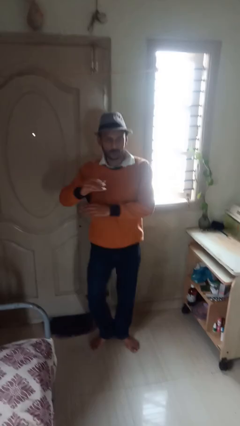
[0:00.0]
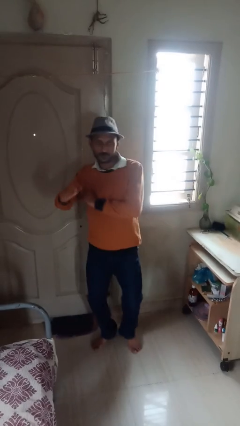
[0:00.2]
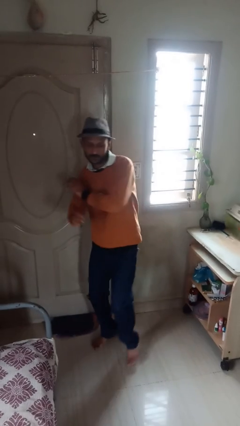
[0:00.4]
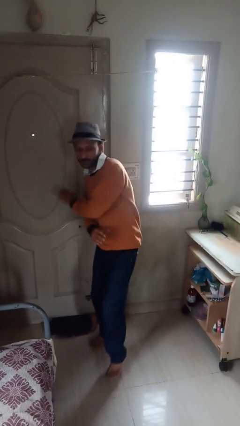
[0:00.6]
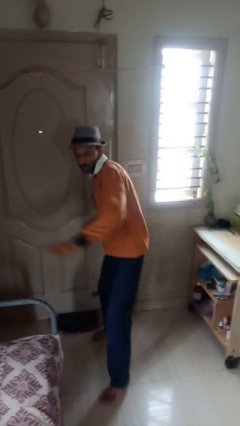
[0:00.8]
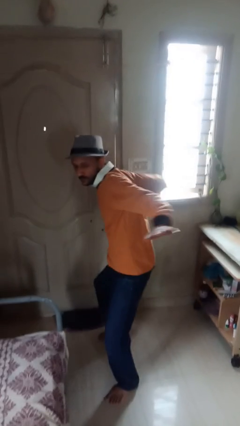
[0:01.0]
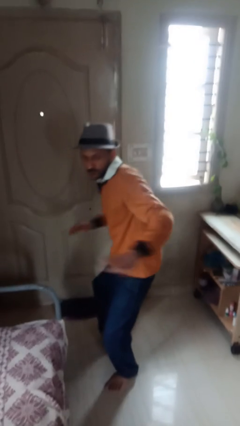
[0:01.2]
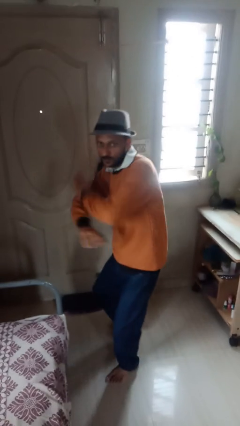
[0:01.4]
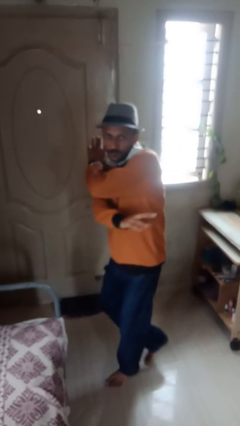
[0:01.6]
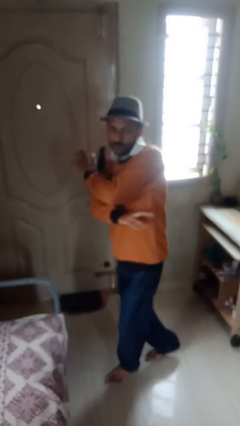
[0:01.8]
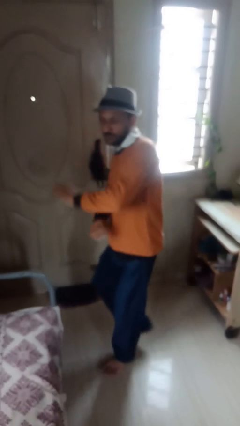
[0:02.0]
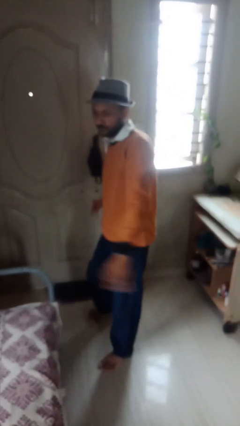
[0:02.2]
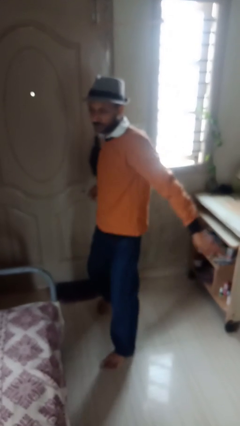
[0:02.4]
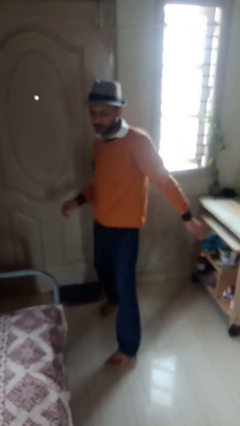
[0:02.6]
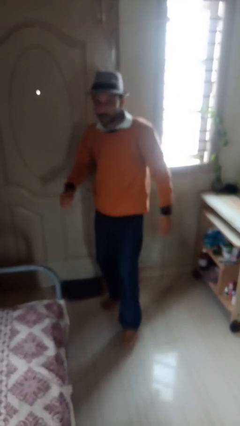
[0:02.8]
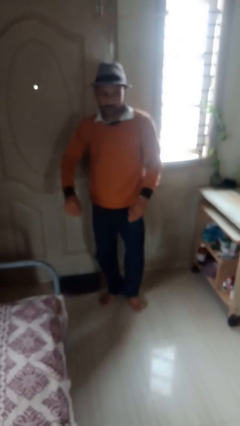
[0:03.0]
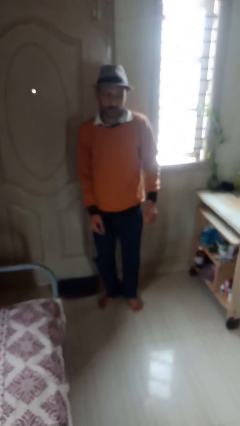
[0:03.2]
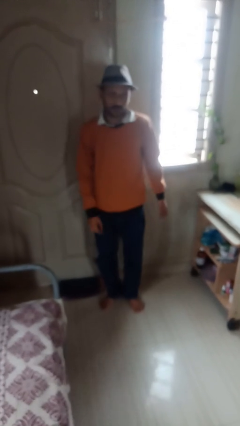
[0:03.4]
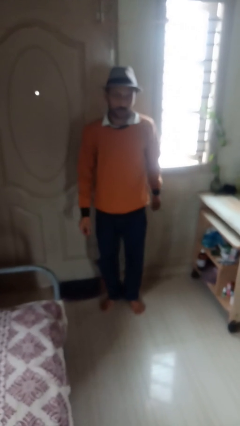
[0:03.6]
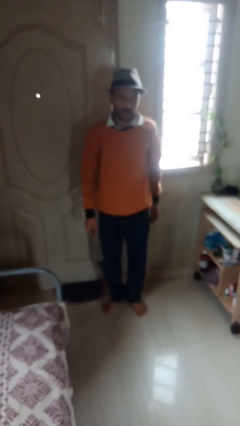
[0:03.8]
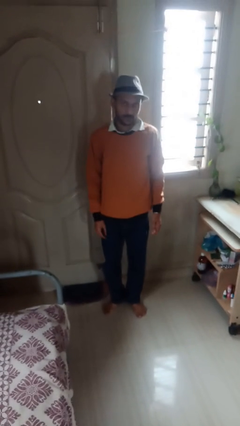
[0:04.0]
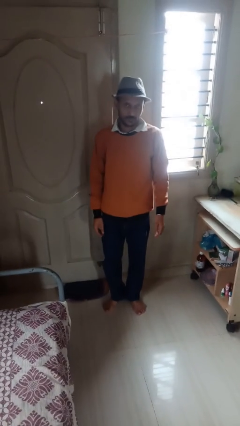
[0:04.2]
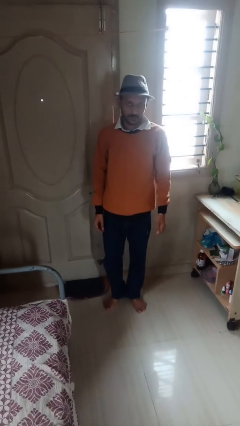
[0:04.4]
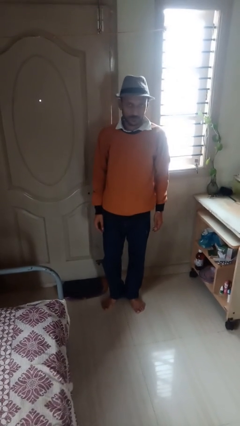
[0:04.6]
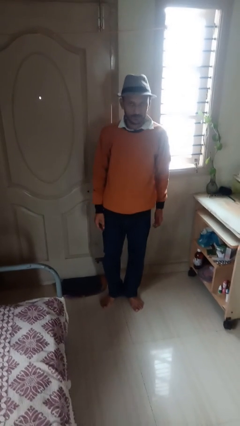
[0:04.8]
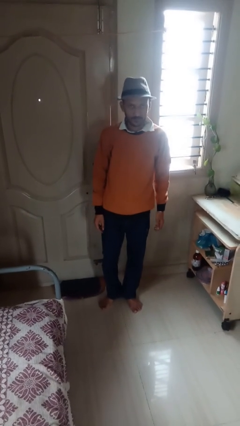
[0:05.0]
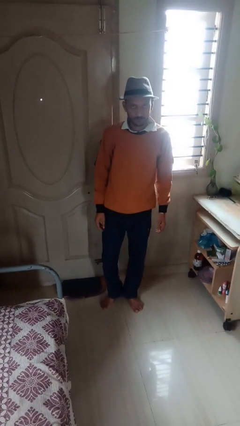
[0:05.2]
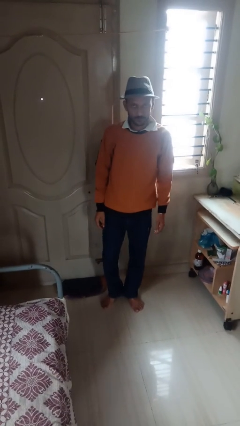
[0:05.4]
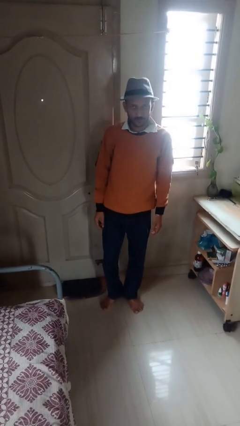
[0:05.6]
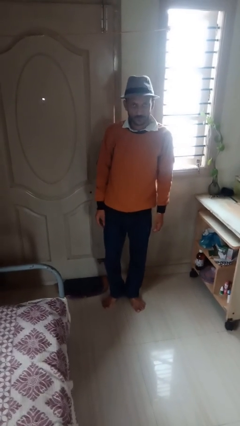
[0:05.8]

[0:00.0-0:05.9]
person karate chop

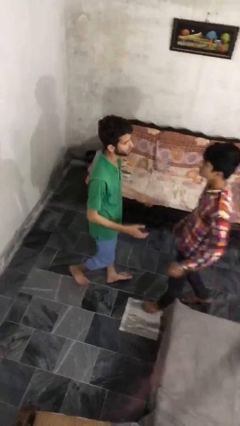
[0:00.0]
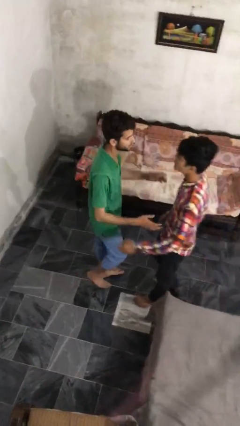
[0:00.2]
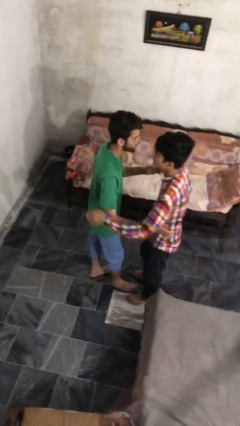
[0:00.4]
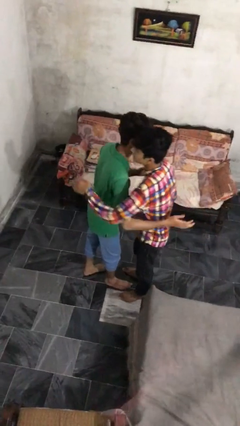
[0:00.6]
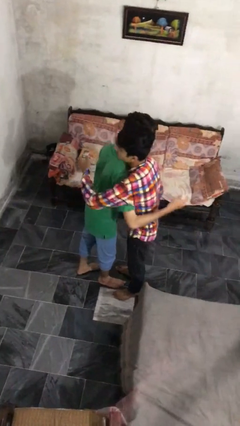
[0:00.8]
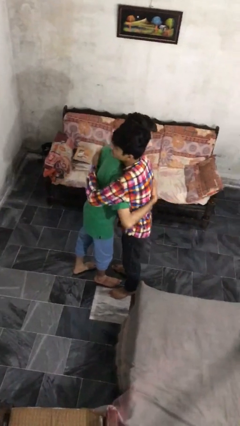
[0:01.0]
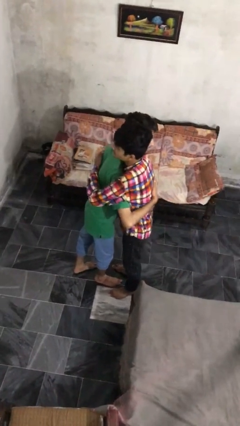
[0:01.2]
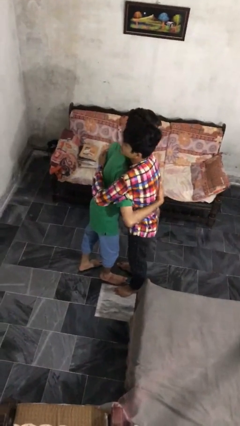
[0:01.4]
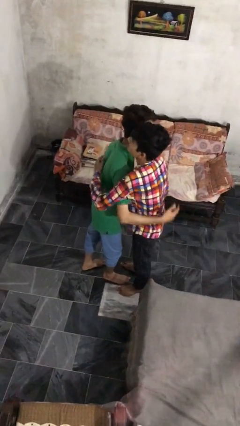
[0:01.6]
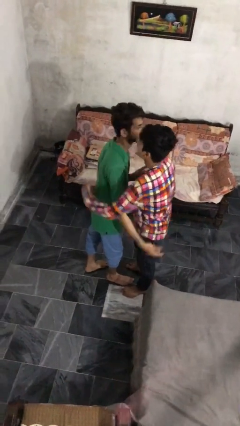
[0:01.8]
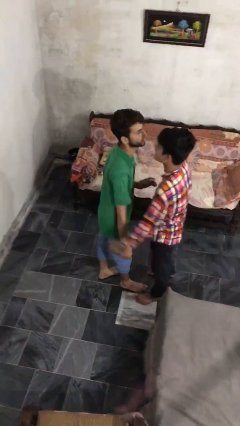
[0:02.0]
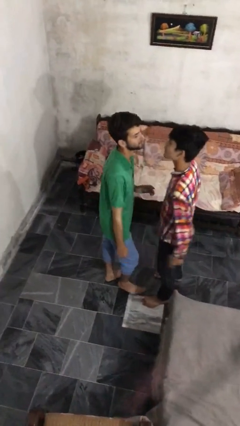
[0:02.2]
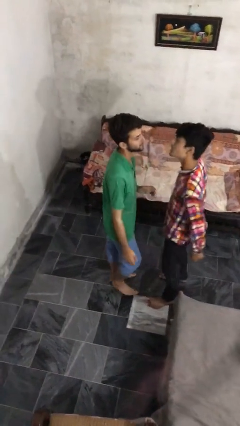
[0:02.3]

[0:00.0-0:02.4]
person embraces person

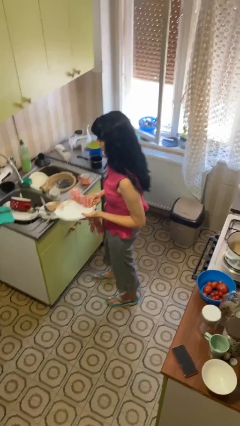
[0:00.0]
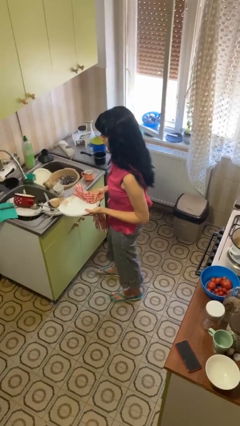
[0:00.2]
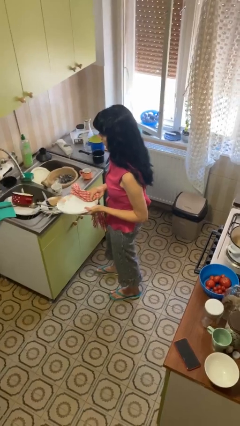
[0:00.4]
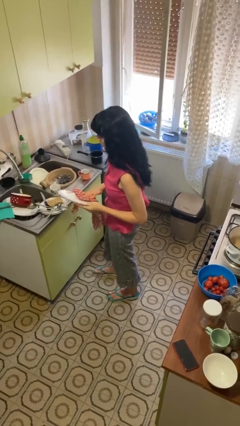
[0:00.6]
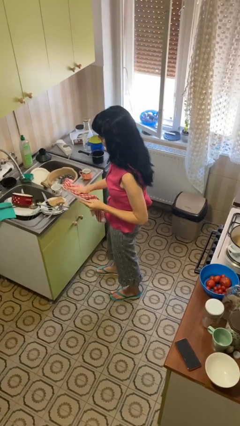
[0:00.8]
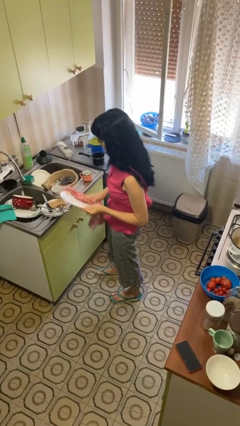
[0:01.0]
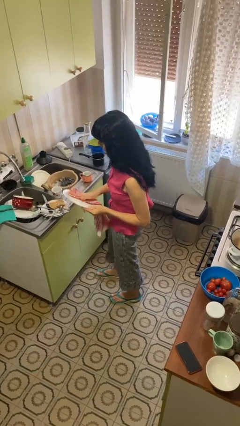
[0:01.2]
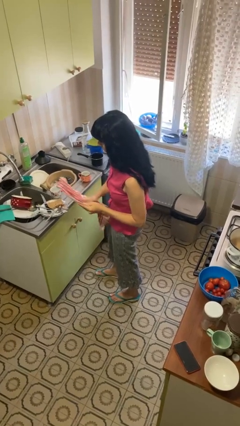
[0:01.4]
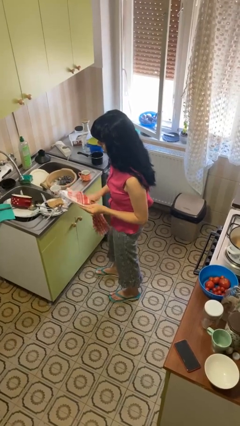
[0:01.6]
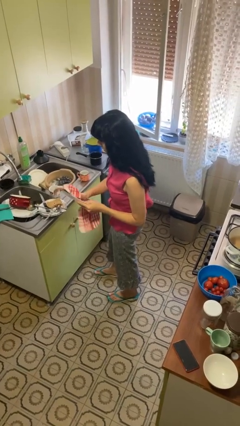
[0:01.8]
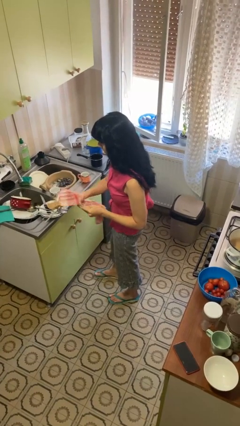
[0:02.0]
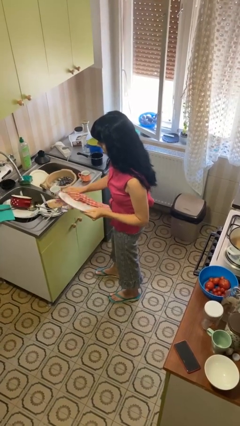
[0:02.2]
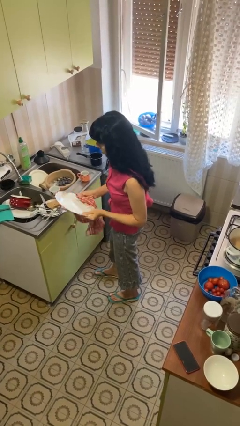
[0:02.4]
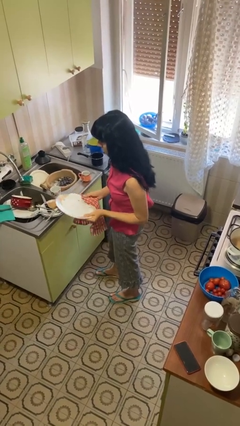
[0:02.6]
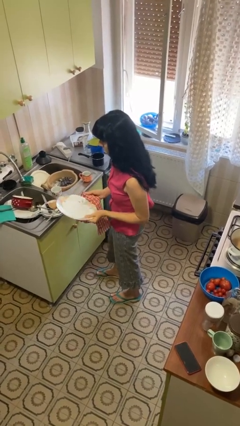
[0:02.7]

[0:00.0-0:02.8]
person dries dish

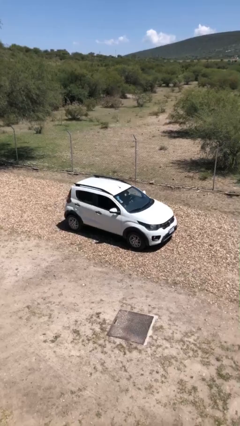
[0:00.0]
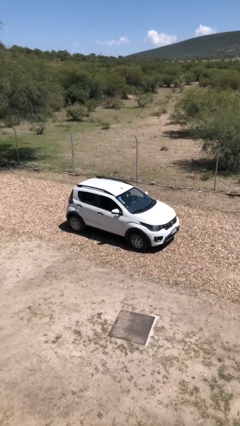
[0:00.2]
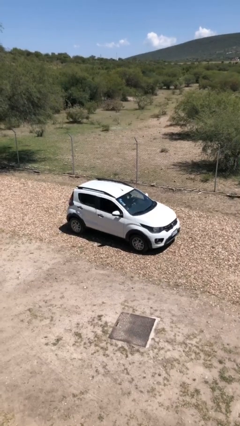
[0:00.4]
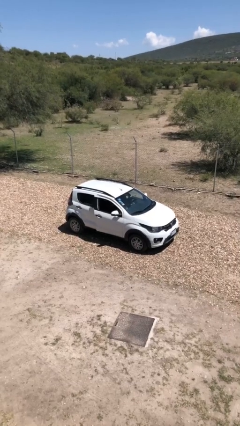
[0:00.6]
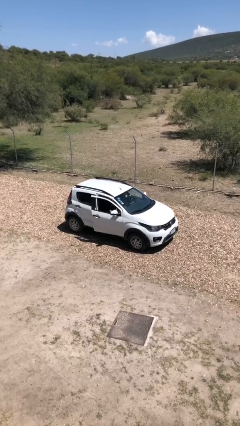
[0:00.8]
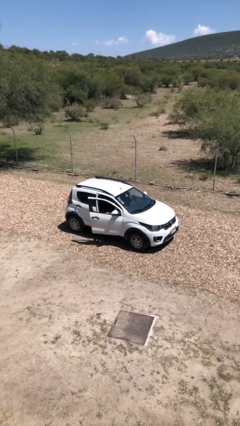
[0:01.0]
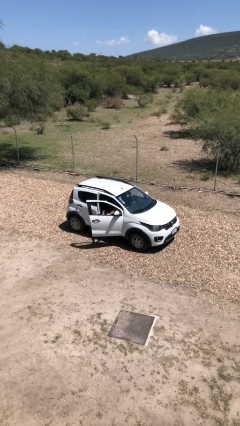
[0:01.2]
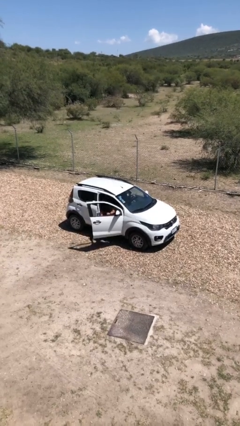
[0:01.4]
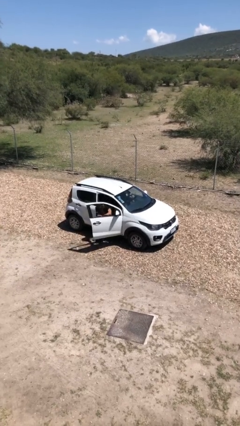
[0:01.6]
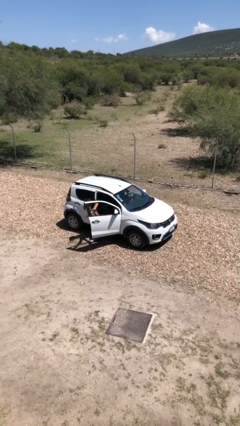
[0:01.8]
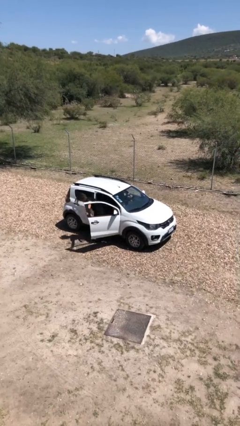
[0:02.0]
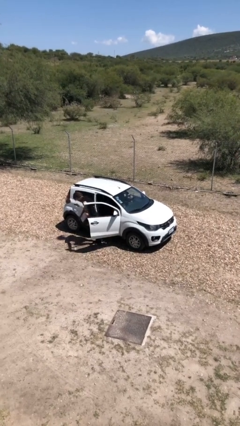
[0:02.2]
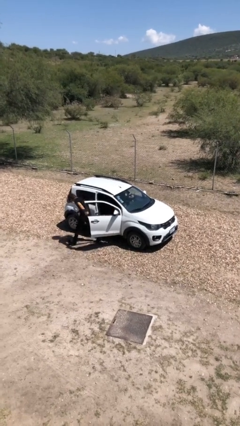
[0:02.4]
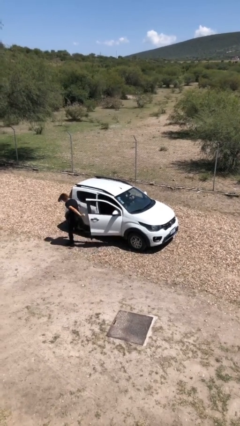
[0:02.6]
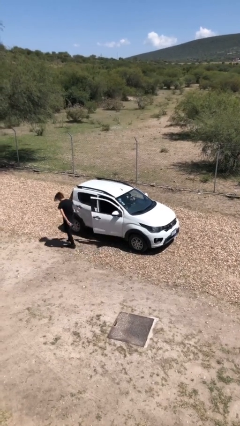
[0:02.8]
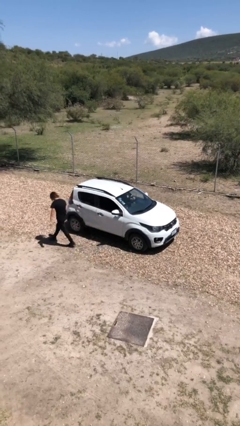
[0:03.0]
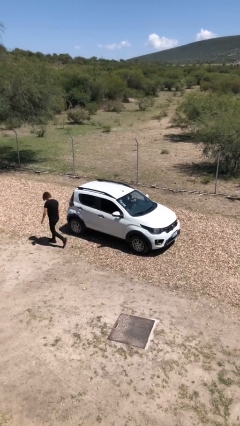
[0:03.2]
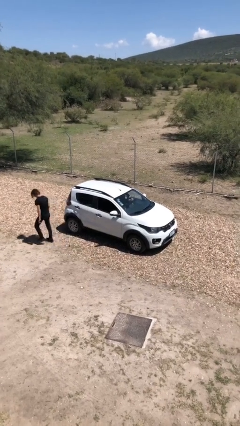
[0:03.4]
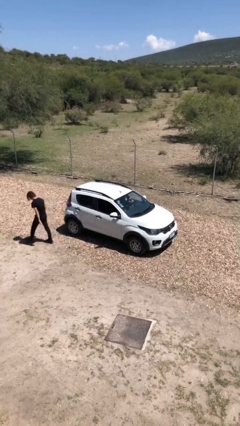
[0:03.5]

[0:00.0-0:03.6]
car drops off person

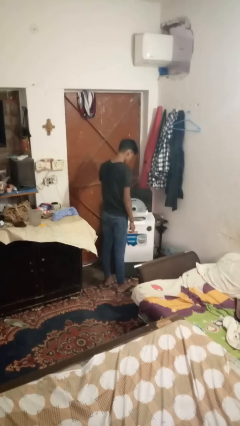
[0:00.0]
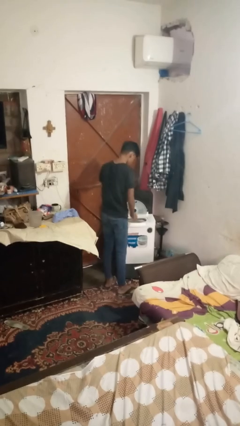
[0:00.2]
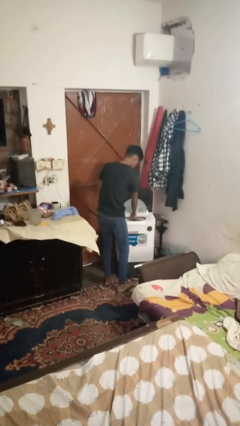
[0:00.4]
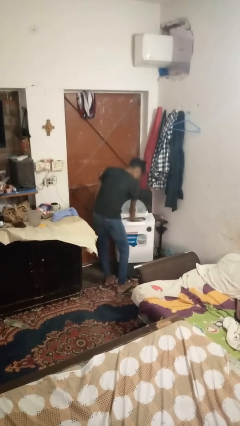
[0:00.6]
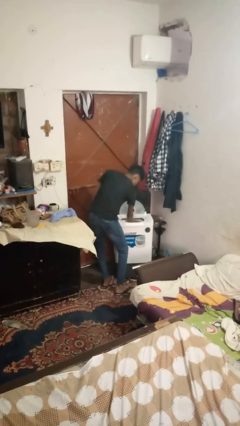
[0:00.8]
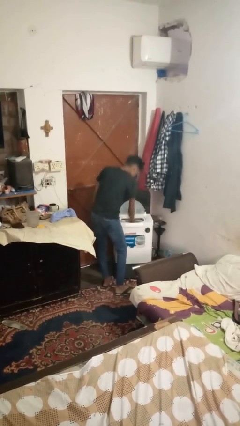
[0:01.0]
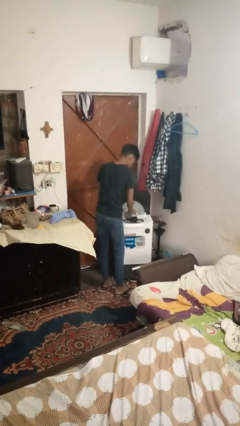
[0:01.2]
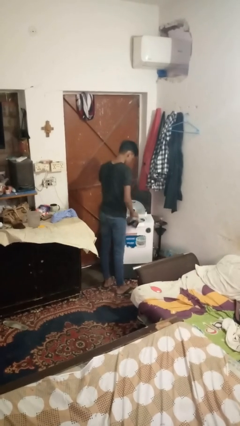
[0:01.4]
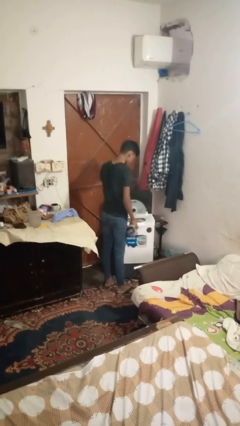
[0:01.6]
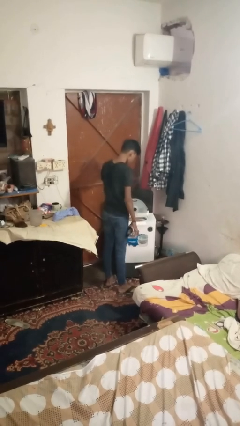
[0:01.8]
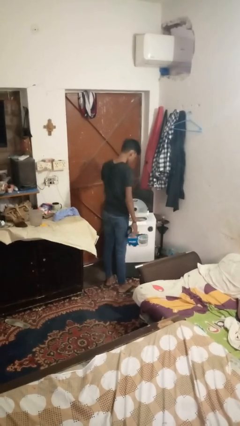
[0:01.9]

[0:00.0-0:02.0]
person unloads clotheswasher

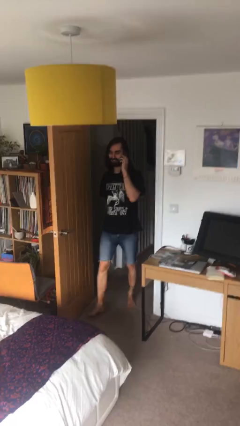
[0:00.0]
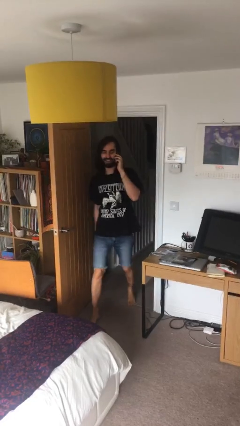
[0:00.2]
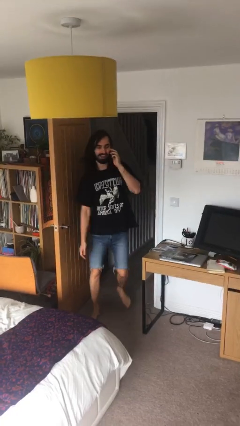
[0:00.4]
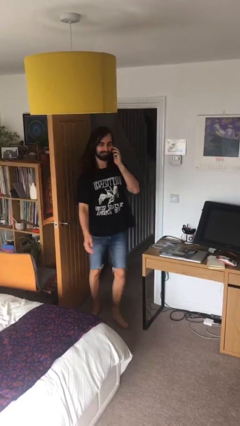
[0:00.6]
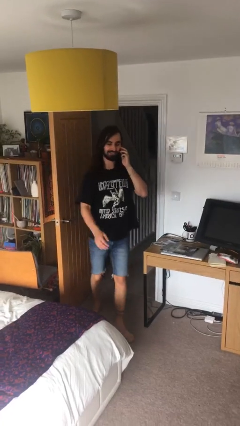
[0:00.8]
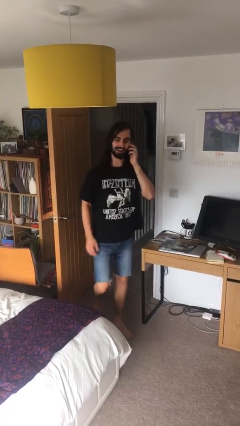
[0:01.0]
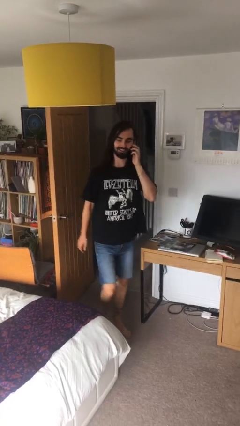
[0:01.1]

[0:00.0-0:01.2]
person enters scene through structure
